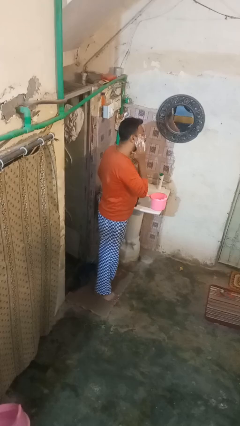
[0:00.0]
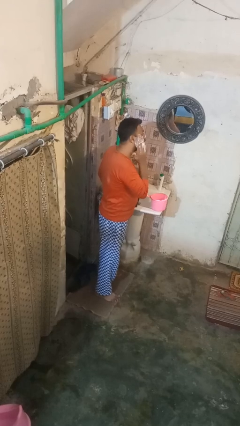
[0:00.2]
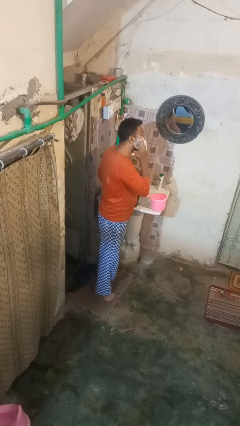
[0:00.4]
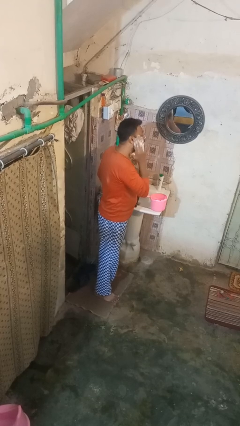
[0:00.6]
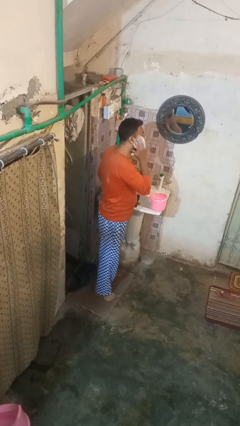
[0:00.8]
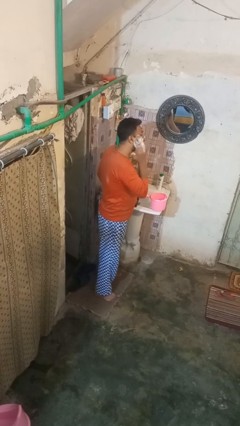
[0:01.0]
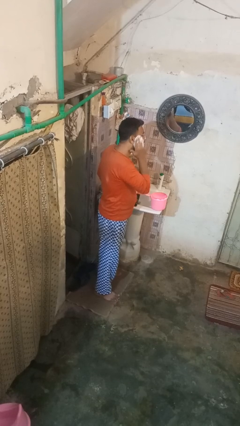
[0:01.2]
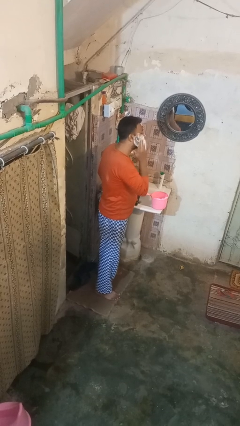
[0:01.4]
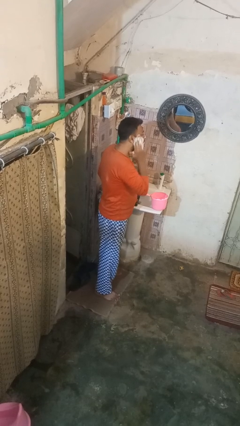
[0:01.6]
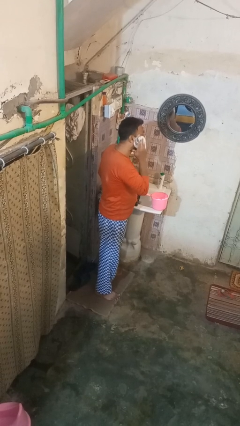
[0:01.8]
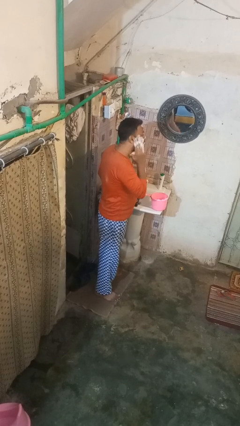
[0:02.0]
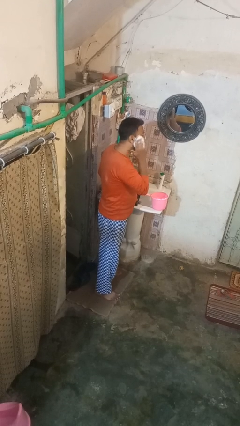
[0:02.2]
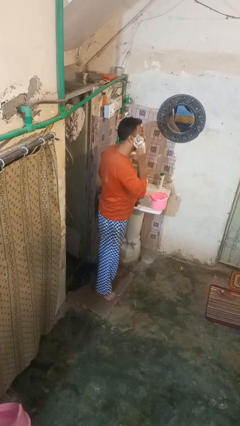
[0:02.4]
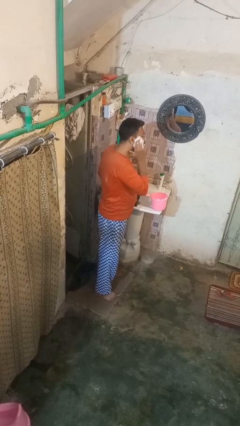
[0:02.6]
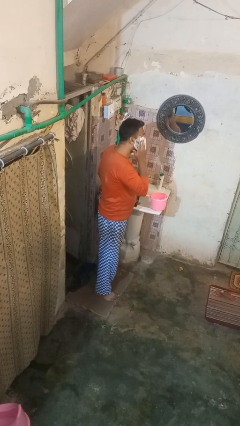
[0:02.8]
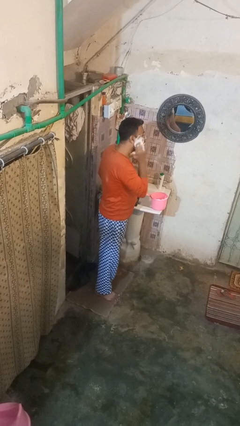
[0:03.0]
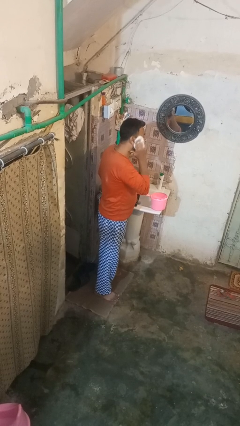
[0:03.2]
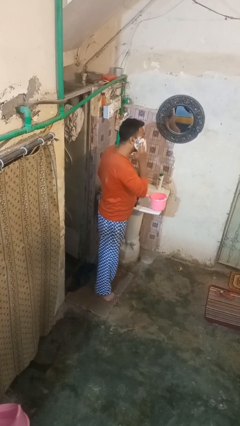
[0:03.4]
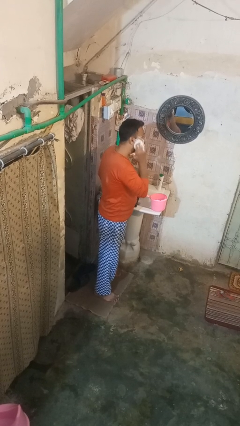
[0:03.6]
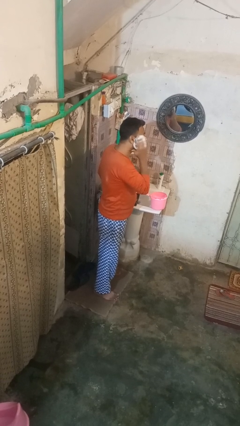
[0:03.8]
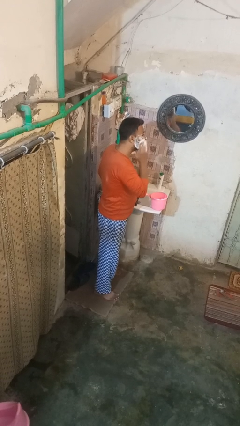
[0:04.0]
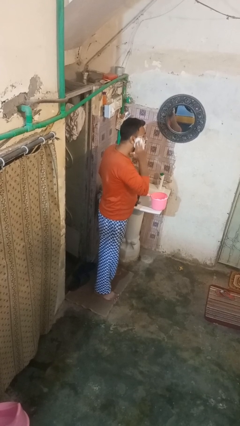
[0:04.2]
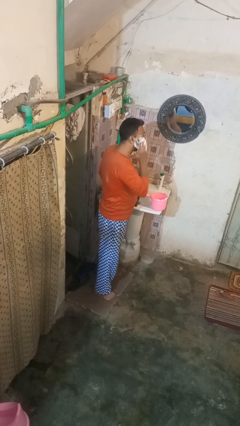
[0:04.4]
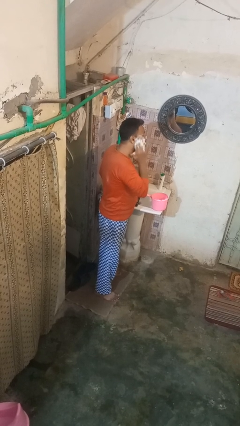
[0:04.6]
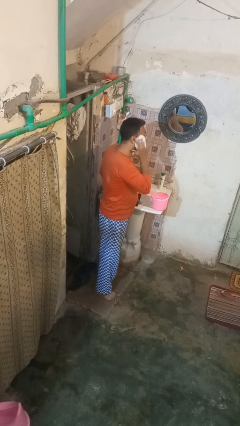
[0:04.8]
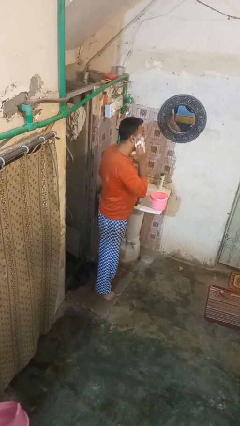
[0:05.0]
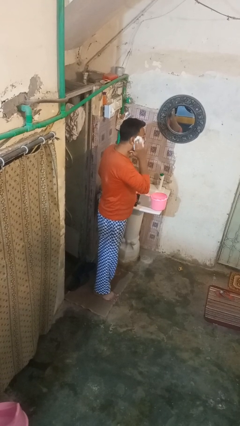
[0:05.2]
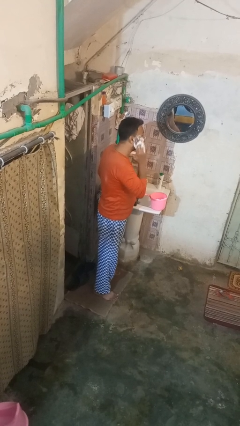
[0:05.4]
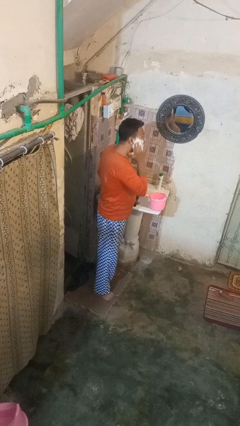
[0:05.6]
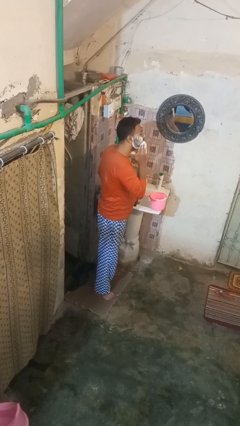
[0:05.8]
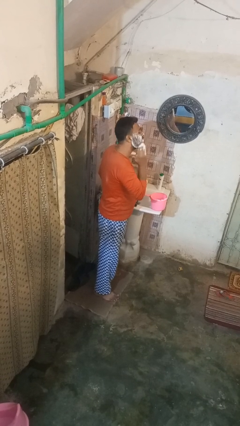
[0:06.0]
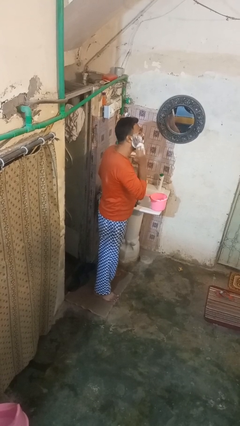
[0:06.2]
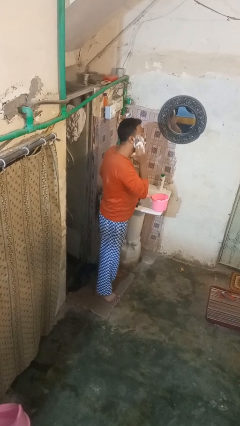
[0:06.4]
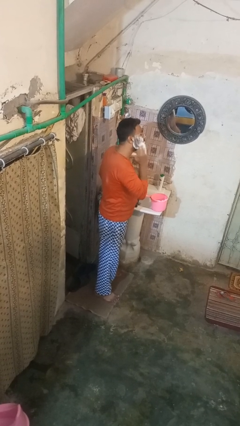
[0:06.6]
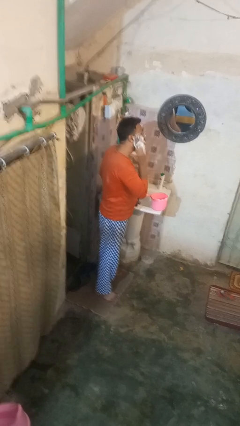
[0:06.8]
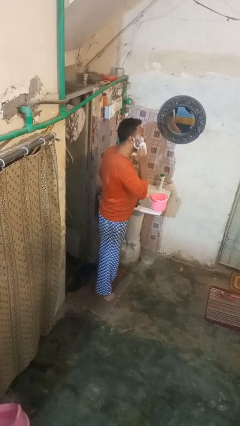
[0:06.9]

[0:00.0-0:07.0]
person shaves face

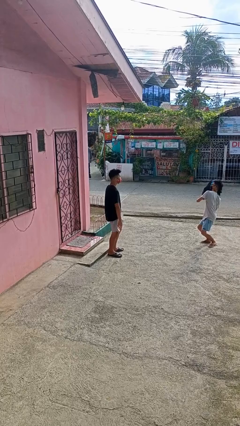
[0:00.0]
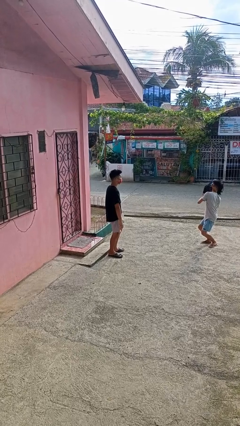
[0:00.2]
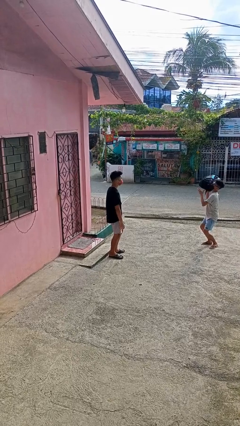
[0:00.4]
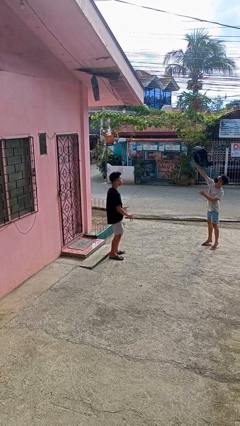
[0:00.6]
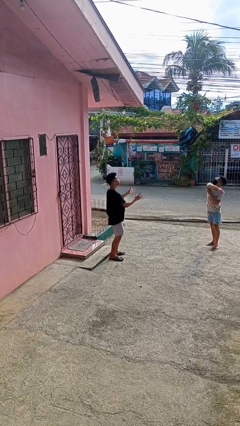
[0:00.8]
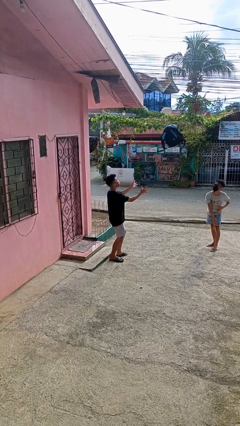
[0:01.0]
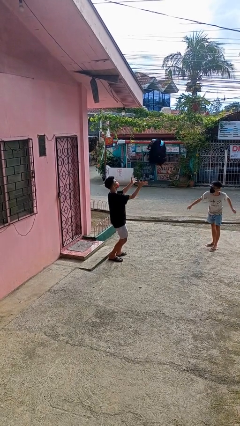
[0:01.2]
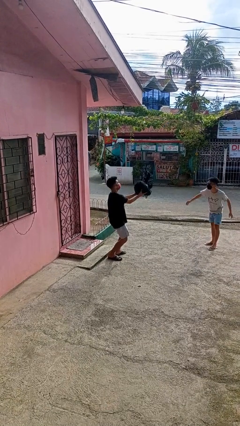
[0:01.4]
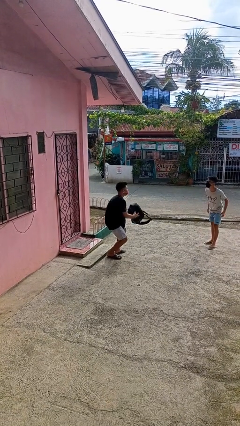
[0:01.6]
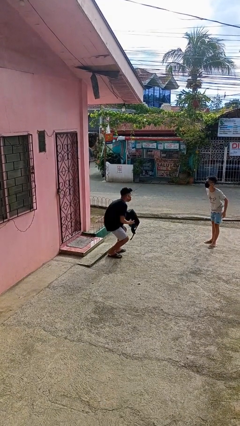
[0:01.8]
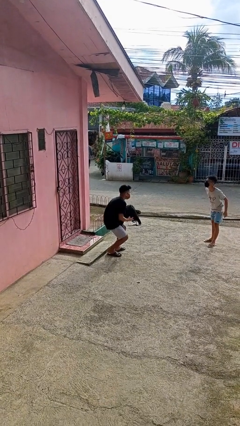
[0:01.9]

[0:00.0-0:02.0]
person catches object from person

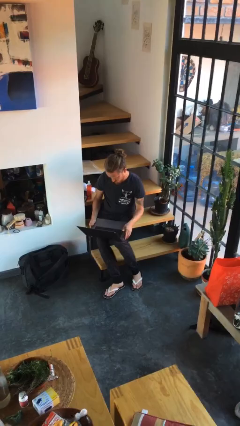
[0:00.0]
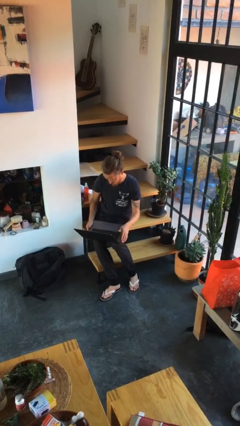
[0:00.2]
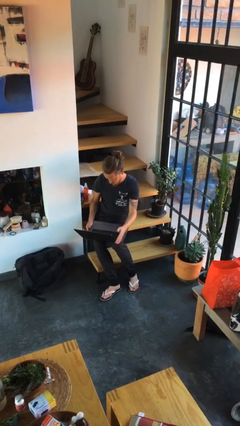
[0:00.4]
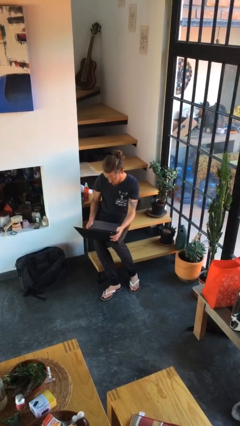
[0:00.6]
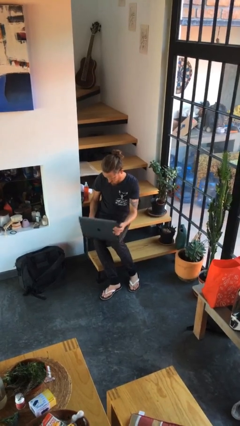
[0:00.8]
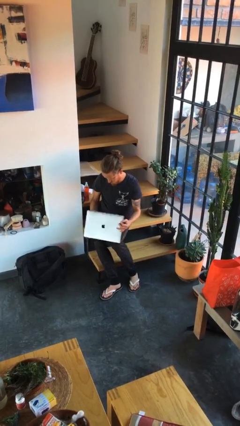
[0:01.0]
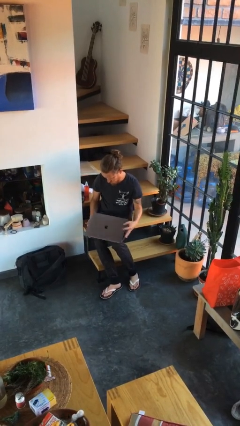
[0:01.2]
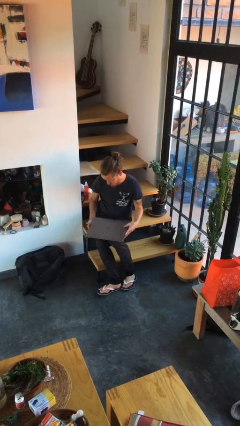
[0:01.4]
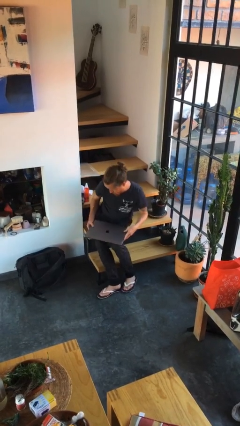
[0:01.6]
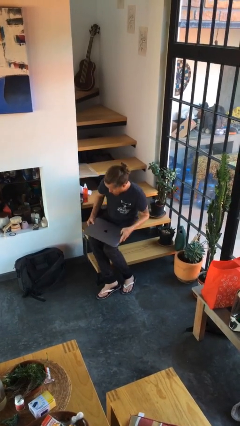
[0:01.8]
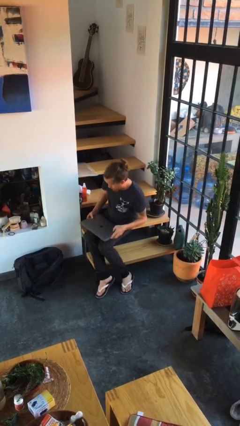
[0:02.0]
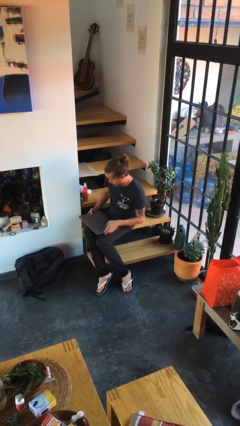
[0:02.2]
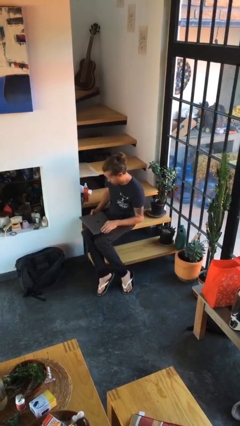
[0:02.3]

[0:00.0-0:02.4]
person closes laptop

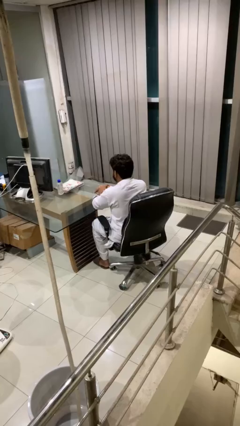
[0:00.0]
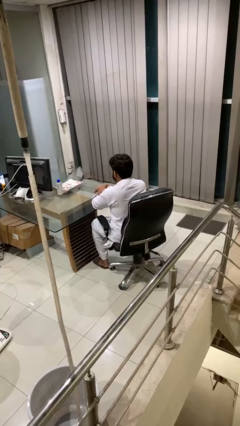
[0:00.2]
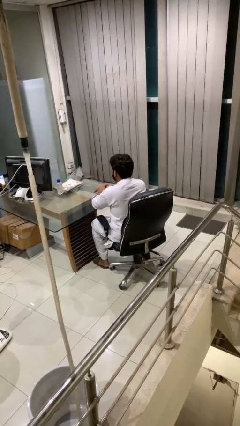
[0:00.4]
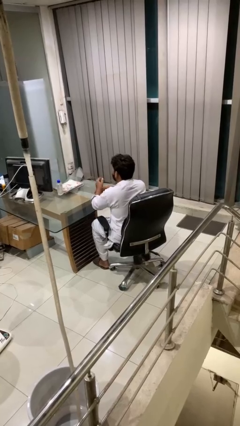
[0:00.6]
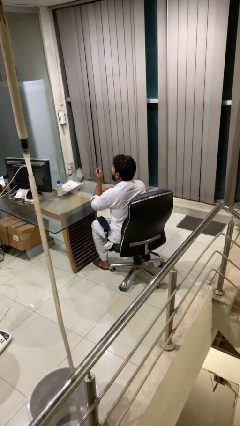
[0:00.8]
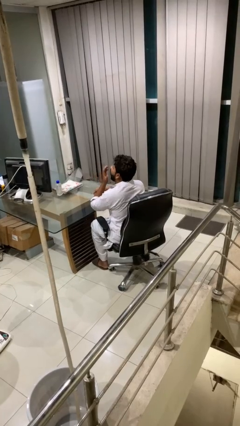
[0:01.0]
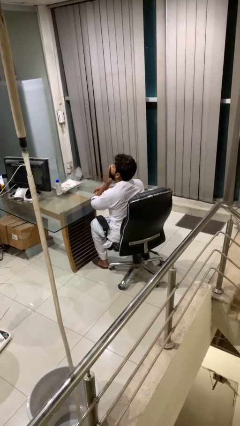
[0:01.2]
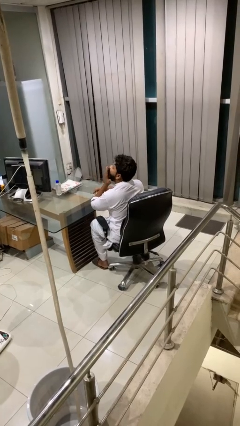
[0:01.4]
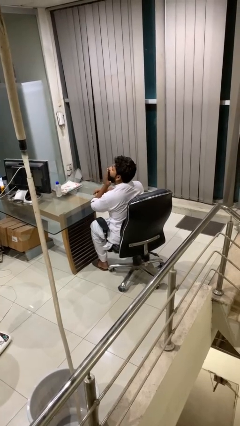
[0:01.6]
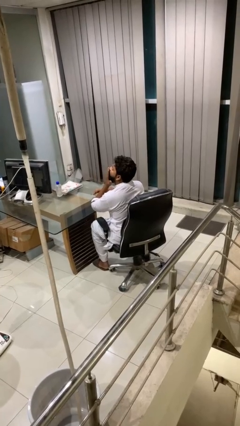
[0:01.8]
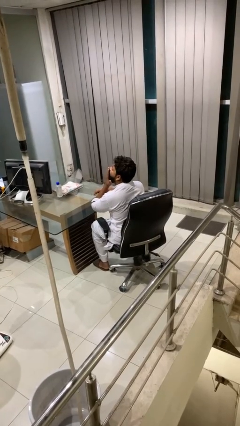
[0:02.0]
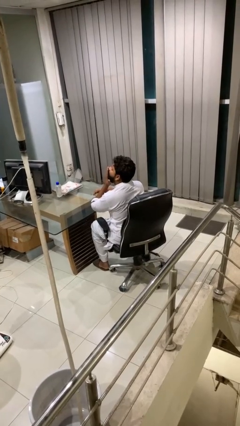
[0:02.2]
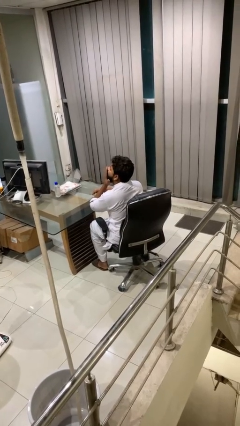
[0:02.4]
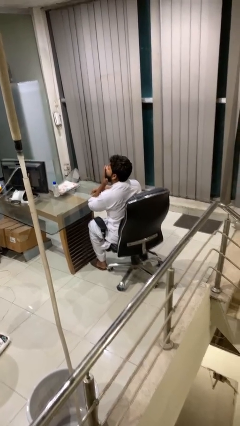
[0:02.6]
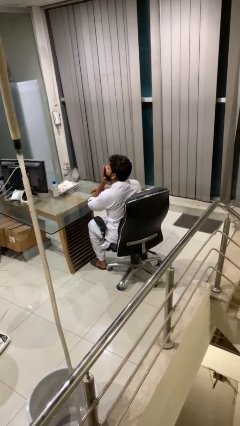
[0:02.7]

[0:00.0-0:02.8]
person yawns

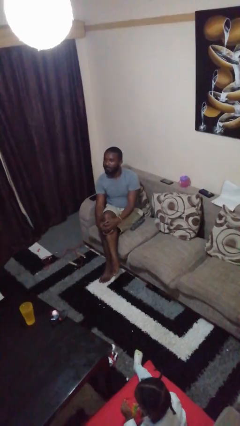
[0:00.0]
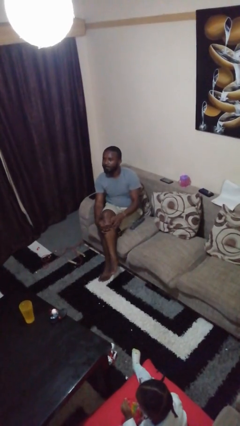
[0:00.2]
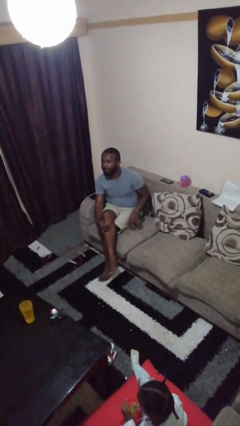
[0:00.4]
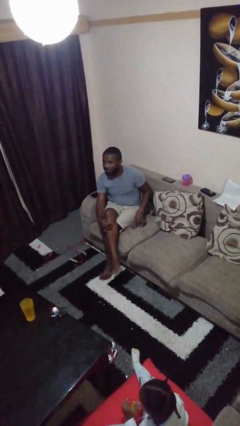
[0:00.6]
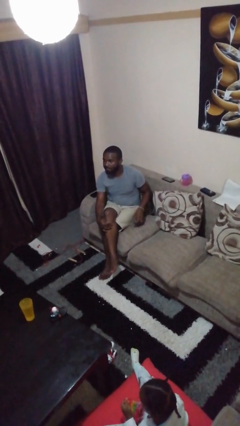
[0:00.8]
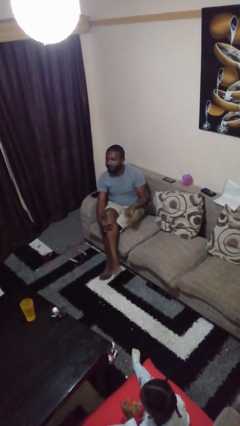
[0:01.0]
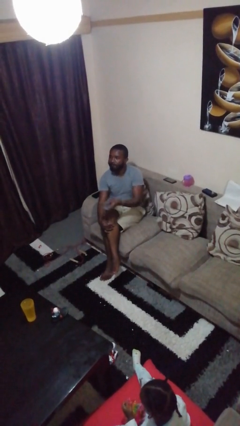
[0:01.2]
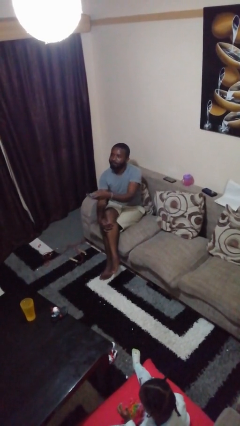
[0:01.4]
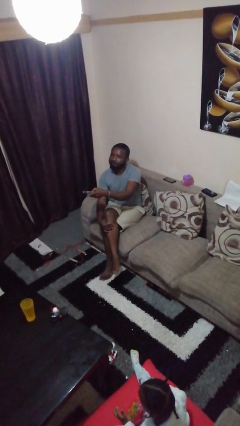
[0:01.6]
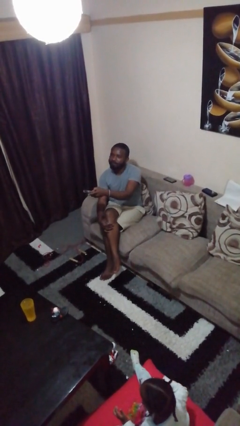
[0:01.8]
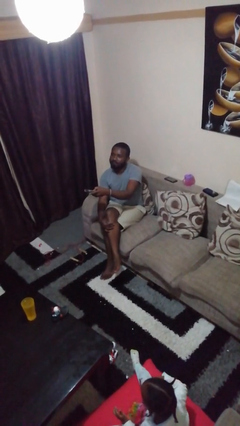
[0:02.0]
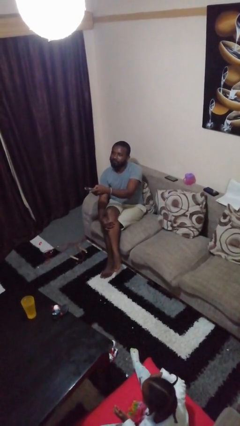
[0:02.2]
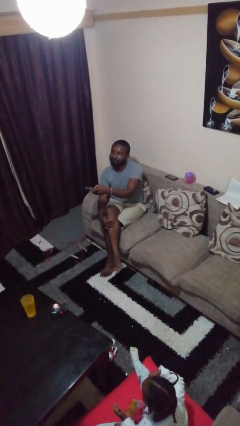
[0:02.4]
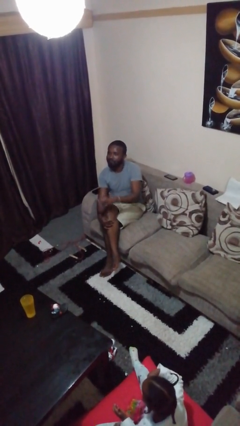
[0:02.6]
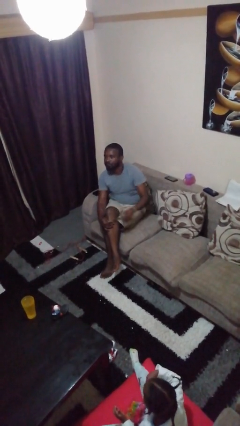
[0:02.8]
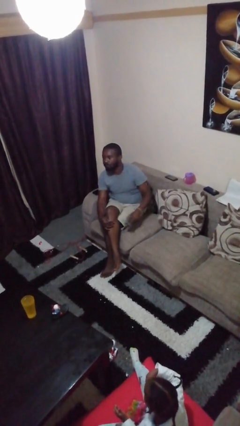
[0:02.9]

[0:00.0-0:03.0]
person uses television remote

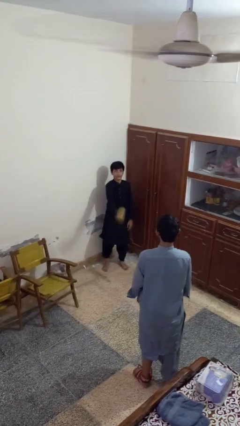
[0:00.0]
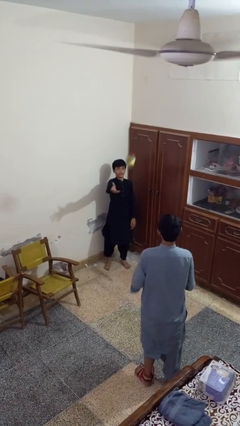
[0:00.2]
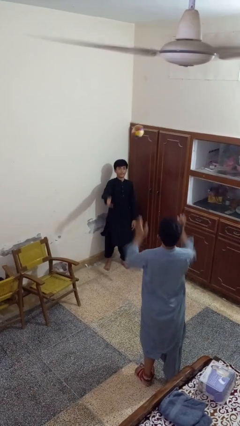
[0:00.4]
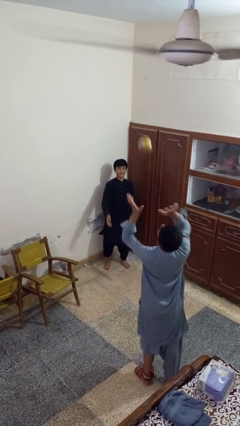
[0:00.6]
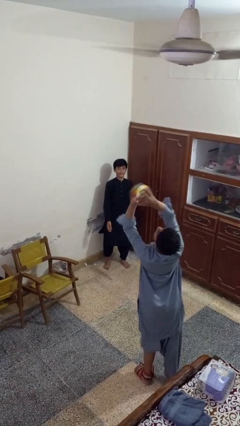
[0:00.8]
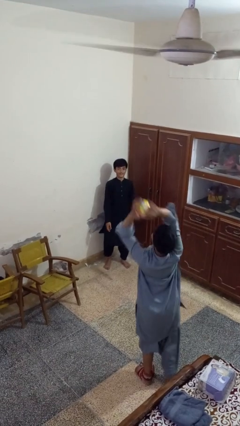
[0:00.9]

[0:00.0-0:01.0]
person throws object to person
